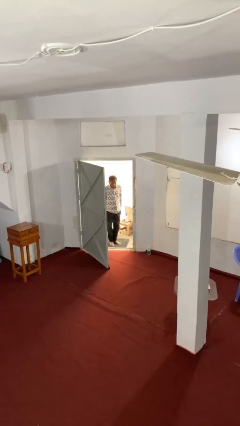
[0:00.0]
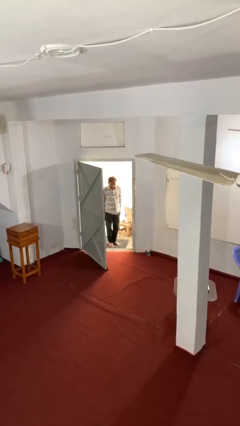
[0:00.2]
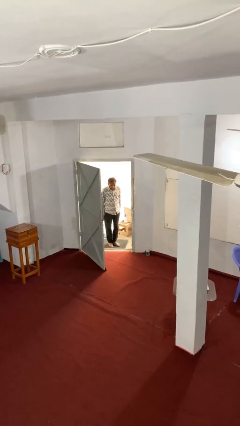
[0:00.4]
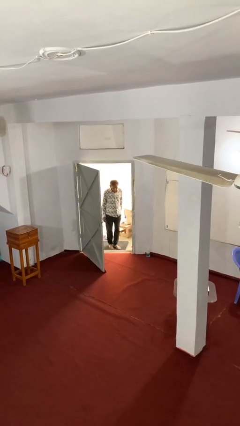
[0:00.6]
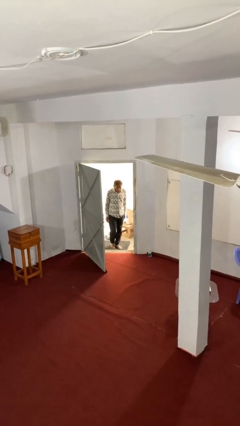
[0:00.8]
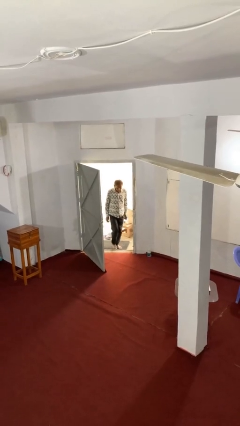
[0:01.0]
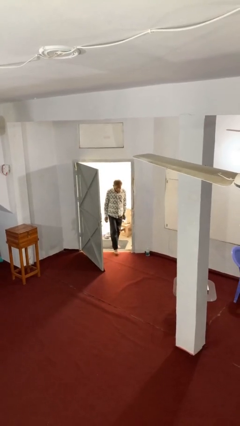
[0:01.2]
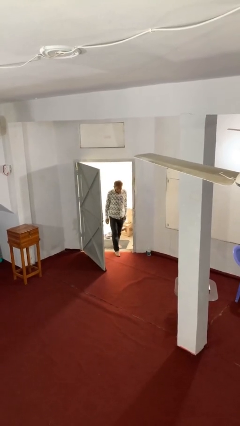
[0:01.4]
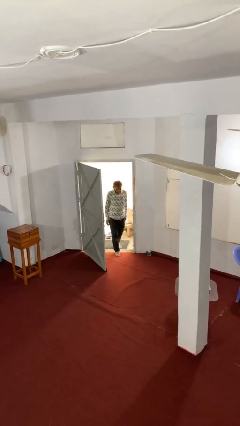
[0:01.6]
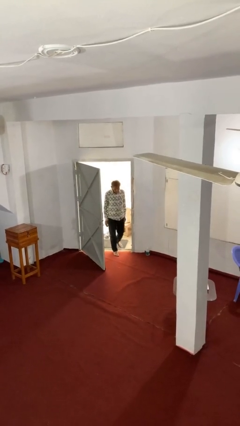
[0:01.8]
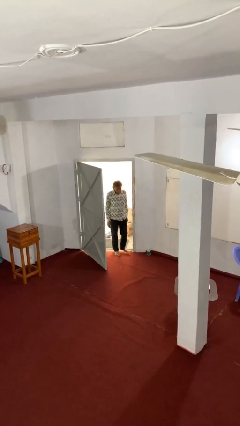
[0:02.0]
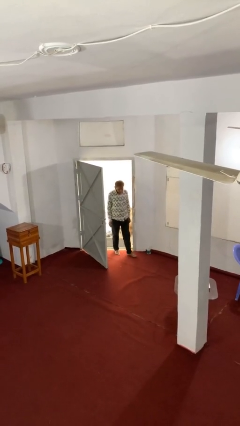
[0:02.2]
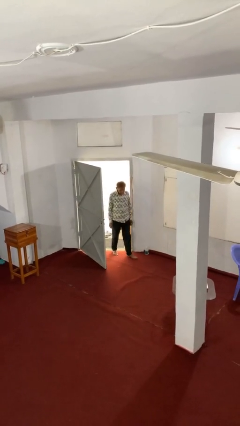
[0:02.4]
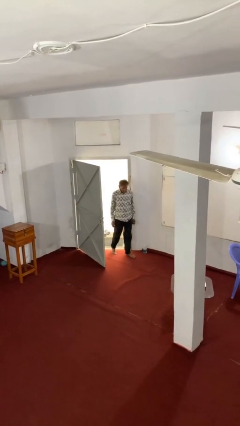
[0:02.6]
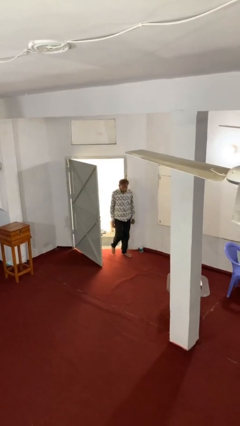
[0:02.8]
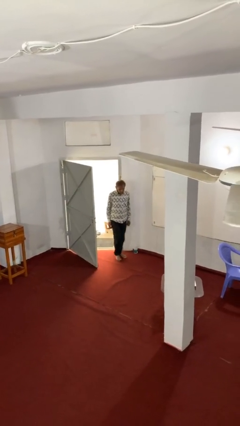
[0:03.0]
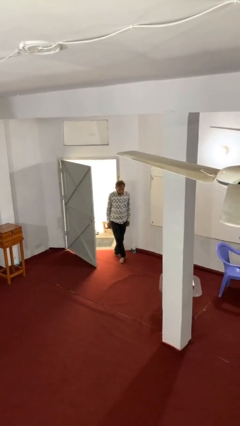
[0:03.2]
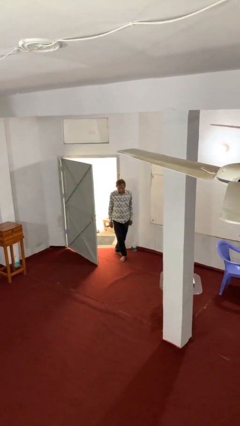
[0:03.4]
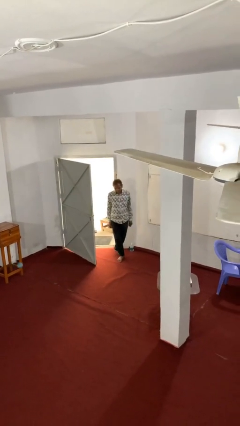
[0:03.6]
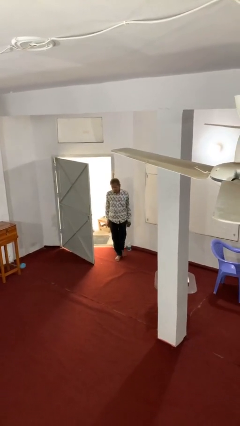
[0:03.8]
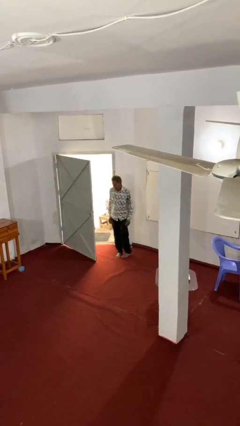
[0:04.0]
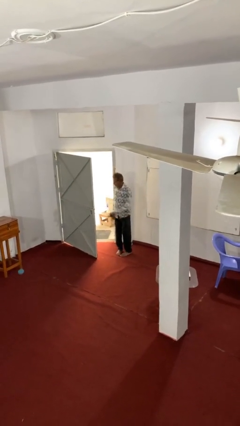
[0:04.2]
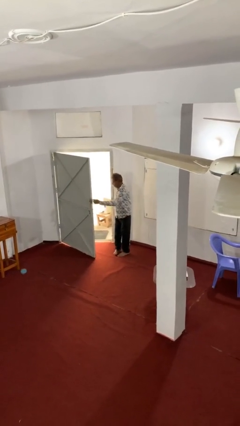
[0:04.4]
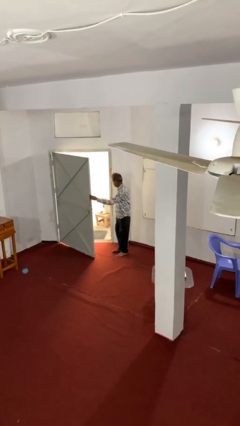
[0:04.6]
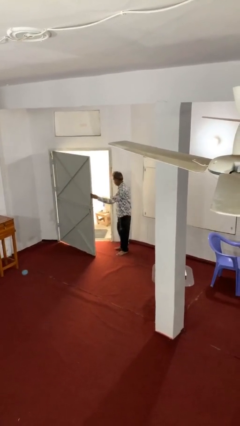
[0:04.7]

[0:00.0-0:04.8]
person enters scene through structure

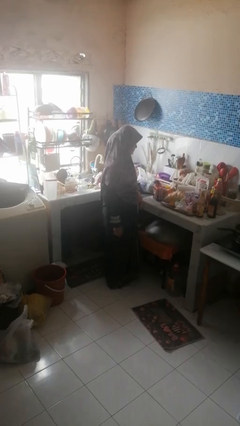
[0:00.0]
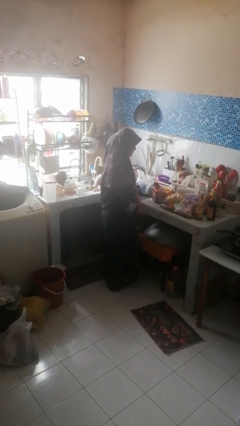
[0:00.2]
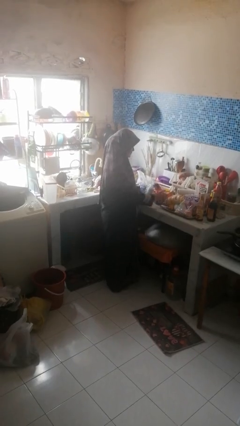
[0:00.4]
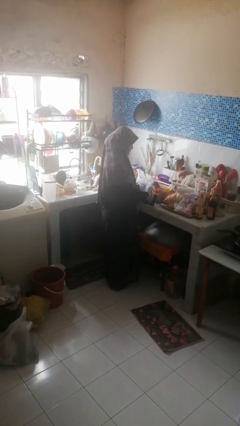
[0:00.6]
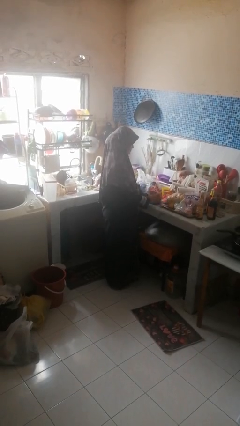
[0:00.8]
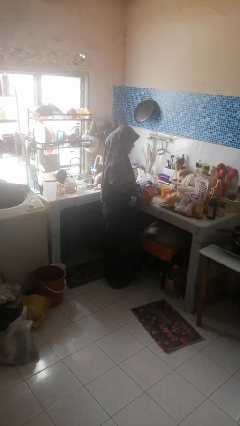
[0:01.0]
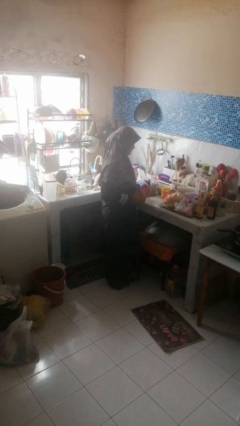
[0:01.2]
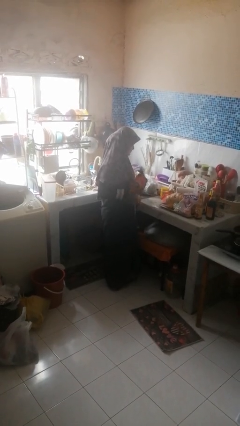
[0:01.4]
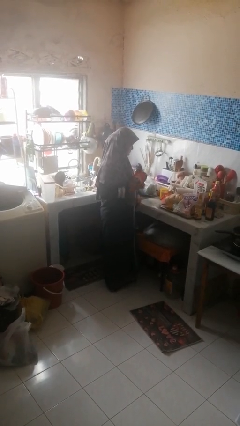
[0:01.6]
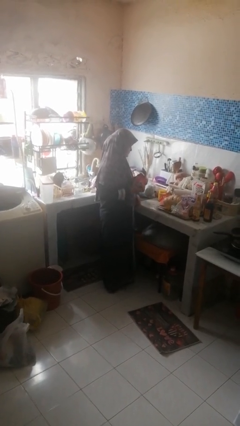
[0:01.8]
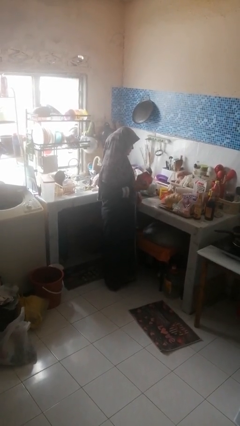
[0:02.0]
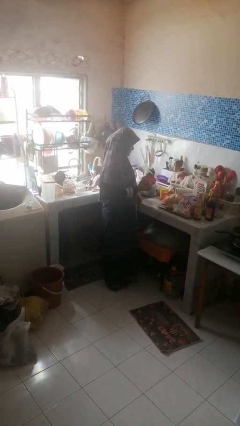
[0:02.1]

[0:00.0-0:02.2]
person picks up object from countertop

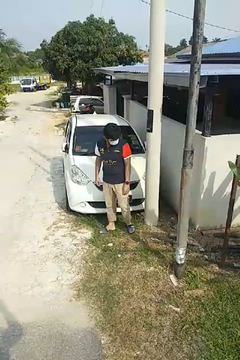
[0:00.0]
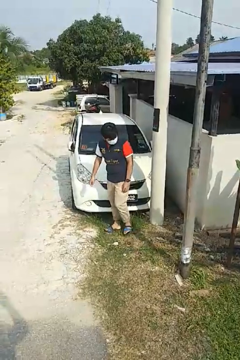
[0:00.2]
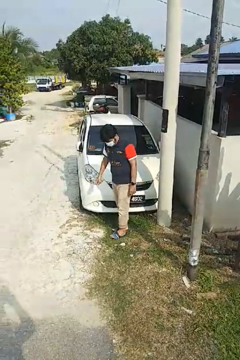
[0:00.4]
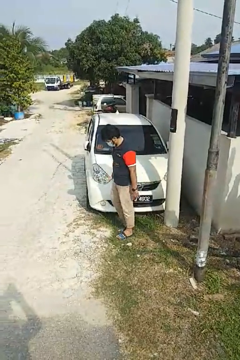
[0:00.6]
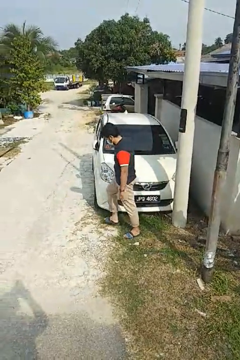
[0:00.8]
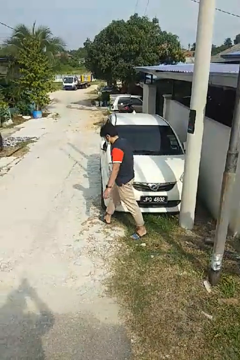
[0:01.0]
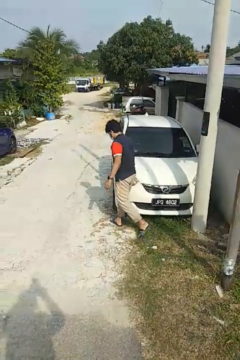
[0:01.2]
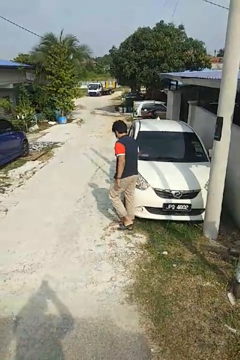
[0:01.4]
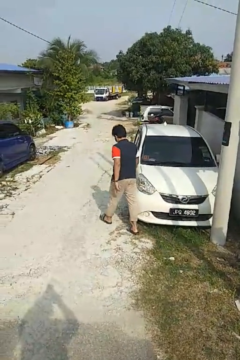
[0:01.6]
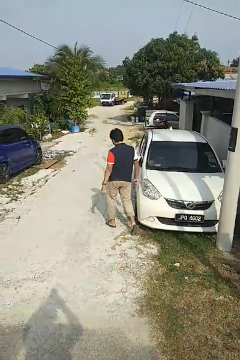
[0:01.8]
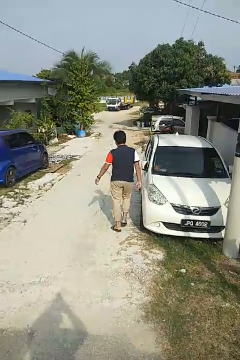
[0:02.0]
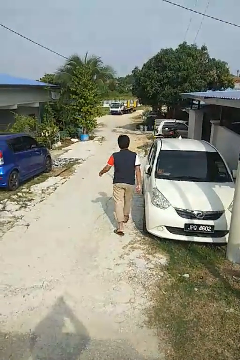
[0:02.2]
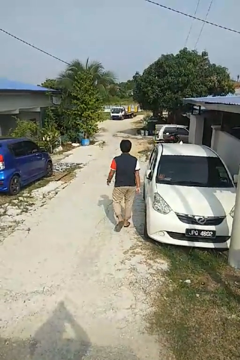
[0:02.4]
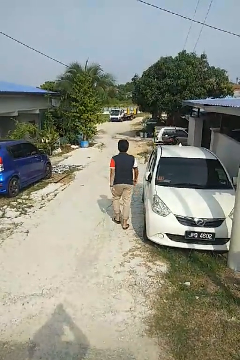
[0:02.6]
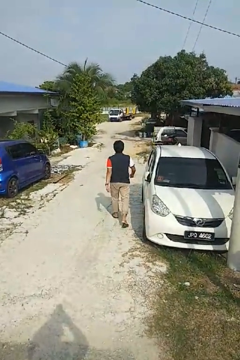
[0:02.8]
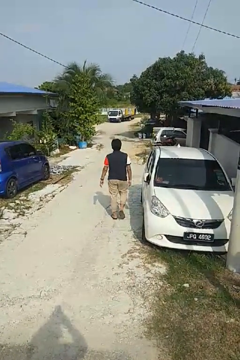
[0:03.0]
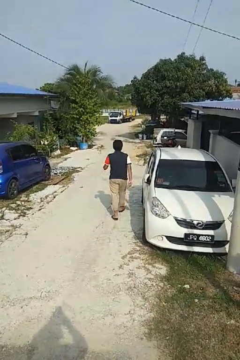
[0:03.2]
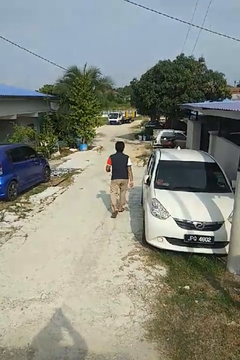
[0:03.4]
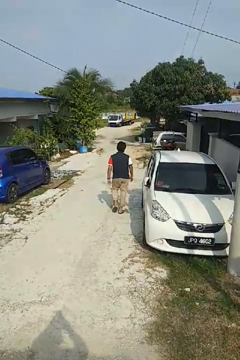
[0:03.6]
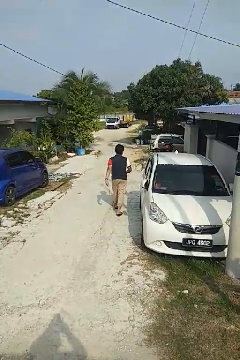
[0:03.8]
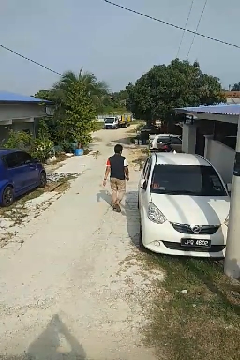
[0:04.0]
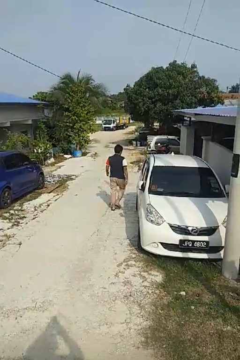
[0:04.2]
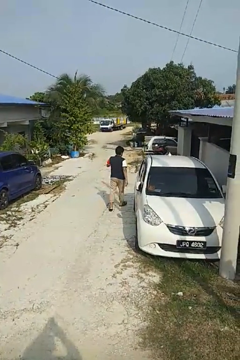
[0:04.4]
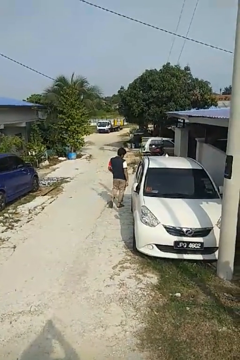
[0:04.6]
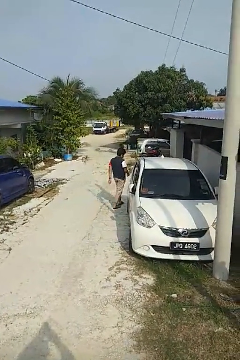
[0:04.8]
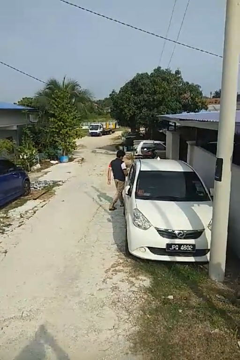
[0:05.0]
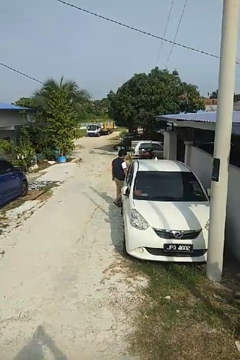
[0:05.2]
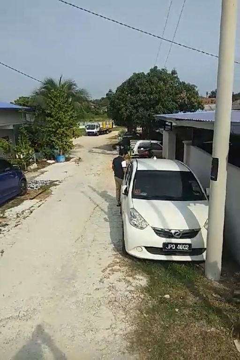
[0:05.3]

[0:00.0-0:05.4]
person walks around car

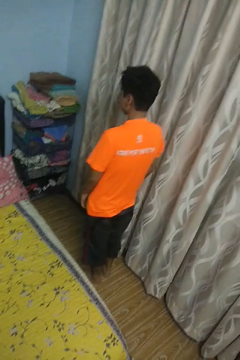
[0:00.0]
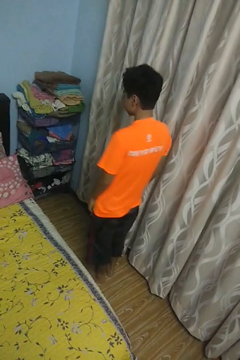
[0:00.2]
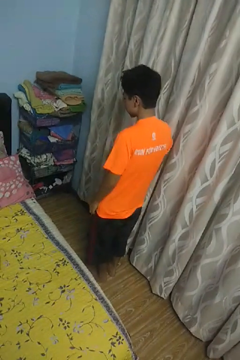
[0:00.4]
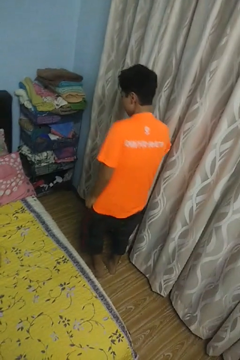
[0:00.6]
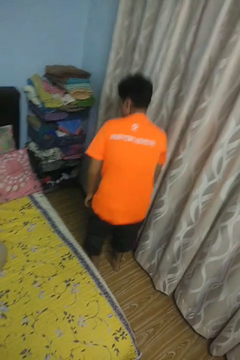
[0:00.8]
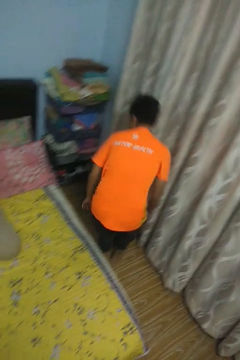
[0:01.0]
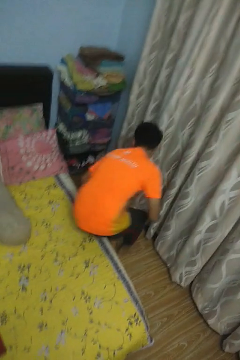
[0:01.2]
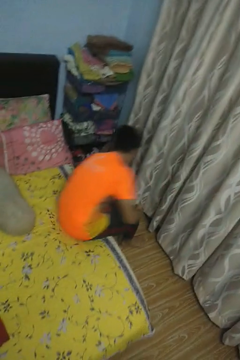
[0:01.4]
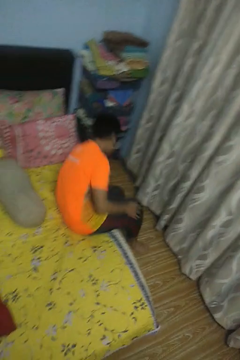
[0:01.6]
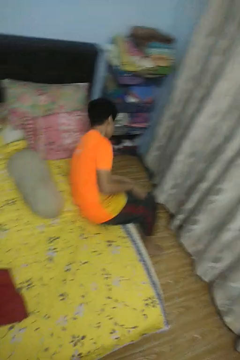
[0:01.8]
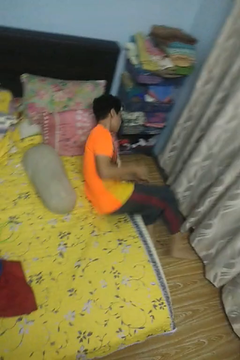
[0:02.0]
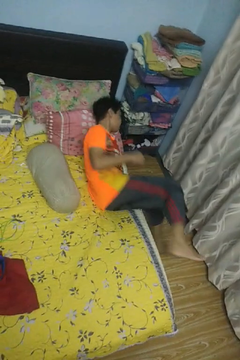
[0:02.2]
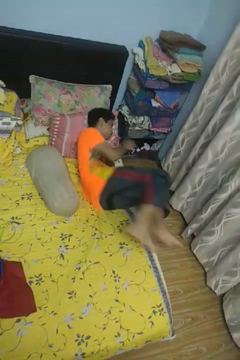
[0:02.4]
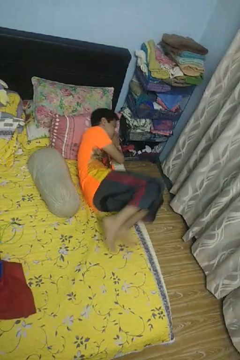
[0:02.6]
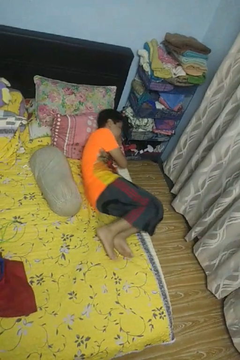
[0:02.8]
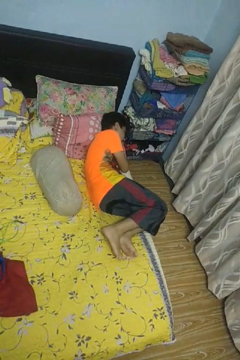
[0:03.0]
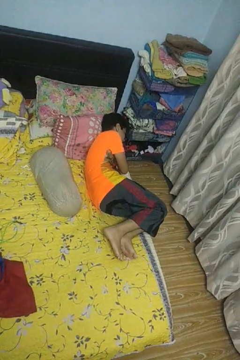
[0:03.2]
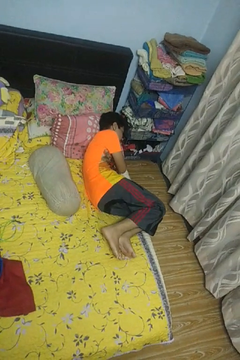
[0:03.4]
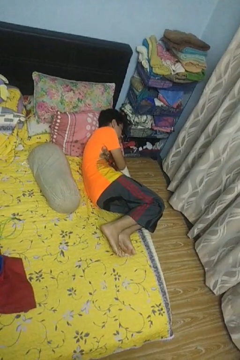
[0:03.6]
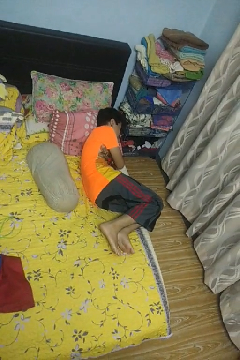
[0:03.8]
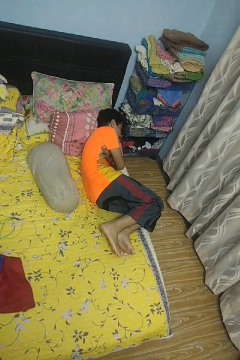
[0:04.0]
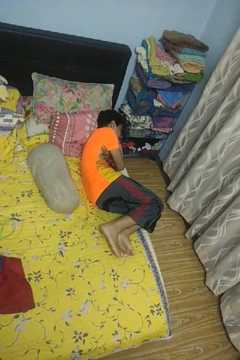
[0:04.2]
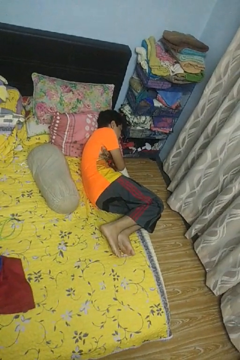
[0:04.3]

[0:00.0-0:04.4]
person lies down on bed

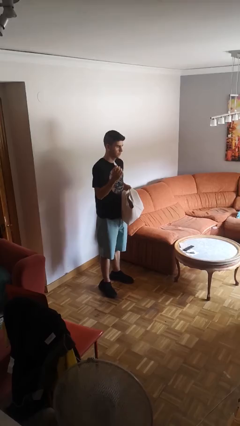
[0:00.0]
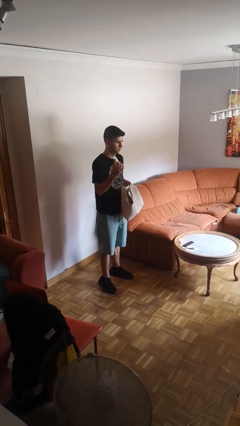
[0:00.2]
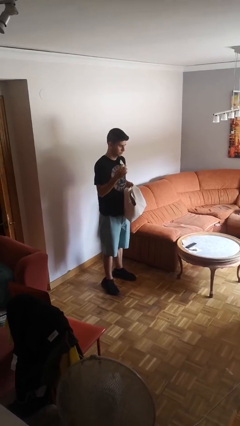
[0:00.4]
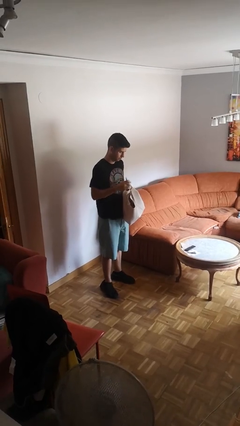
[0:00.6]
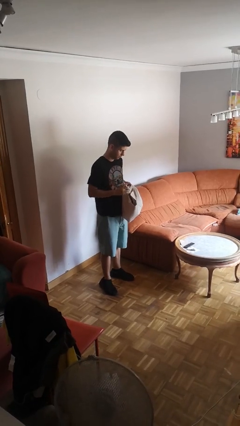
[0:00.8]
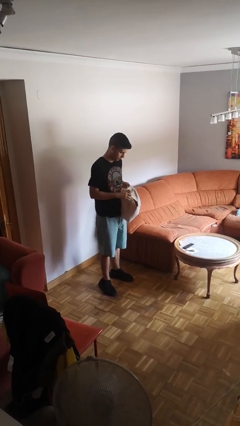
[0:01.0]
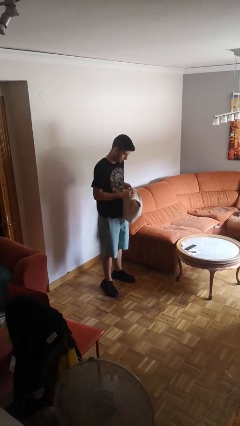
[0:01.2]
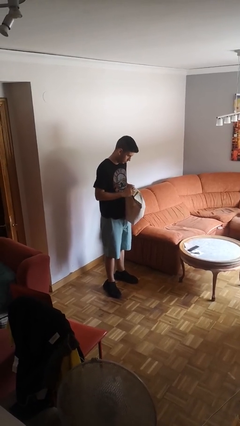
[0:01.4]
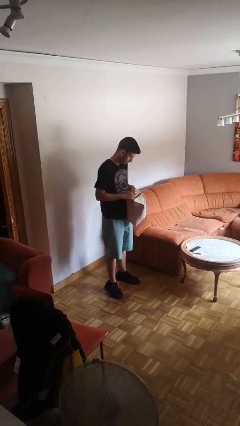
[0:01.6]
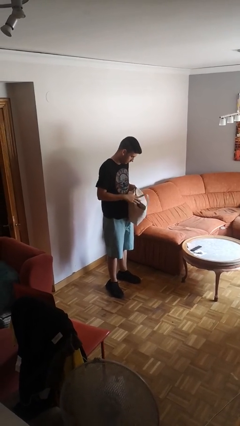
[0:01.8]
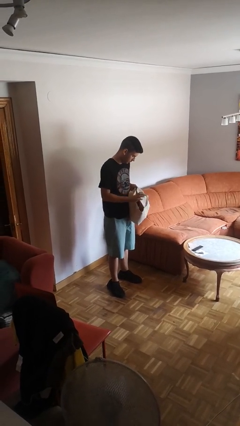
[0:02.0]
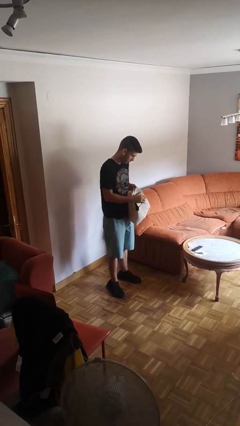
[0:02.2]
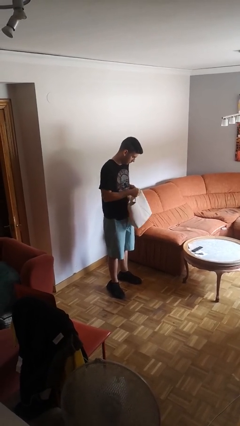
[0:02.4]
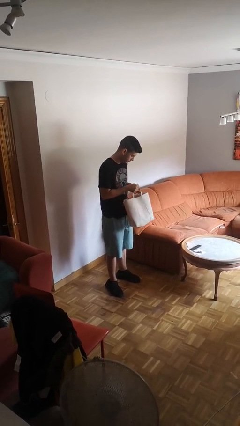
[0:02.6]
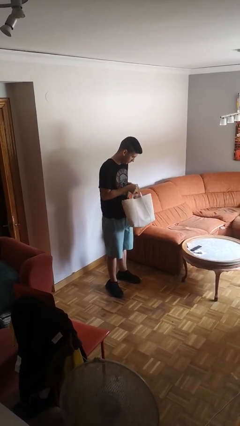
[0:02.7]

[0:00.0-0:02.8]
person puts object into purse
